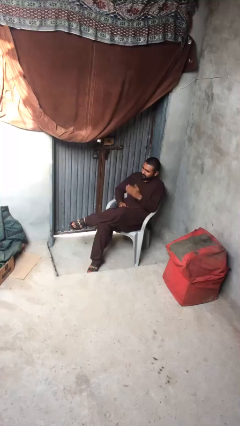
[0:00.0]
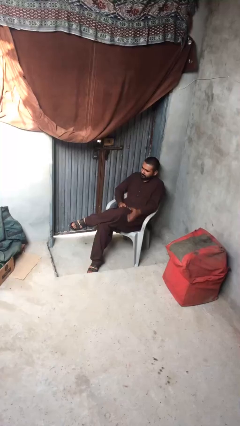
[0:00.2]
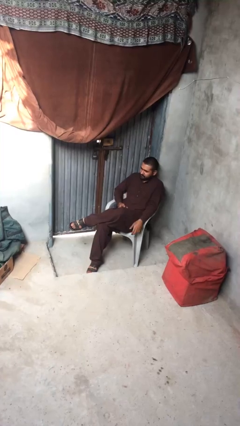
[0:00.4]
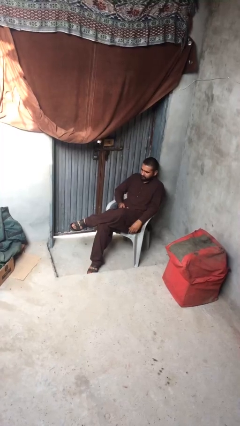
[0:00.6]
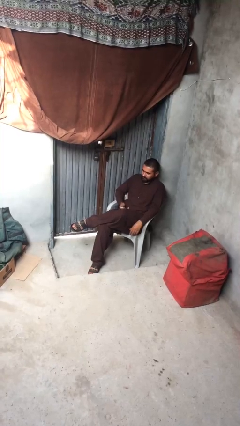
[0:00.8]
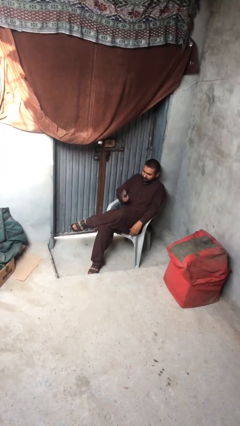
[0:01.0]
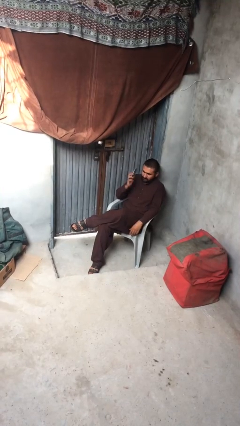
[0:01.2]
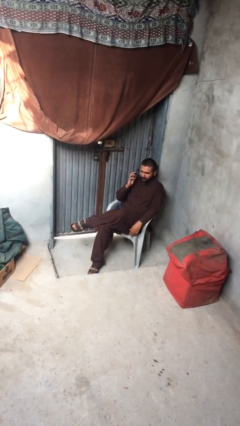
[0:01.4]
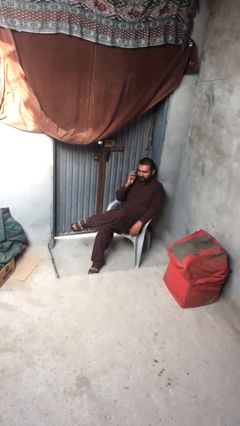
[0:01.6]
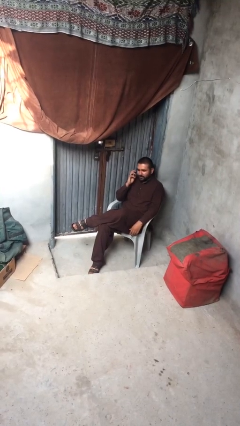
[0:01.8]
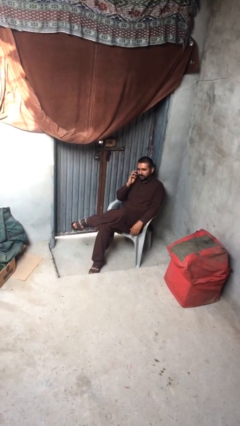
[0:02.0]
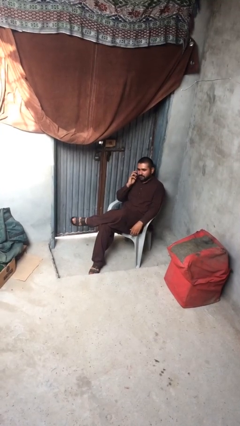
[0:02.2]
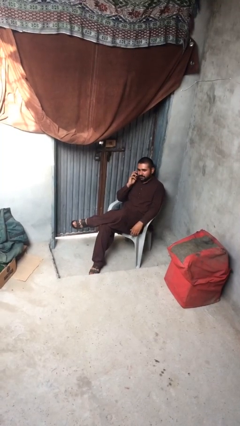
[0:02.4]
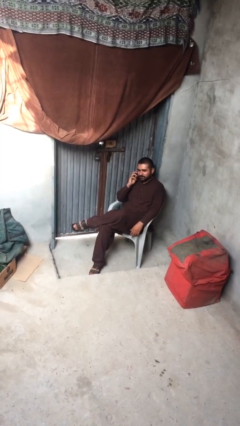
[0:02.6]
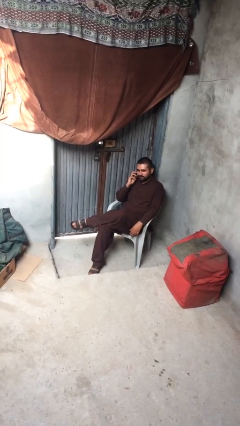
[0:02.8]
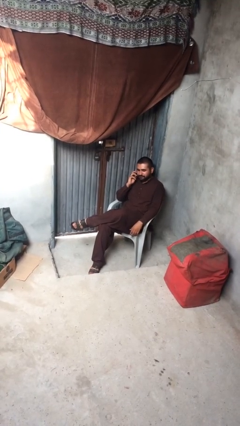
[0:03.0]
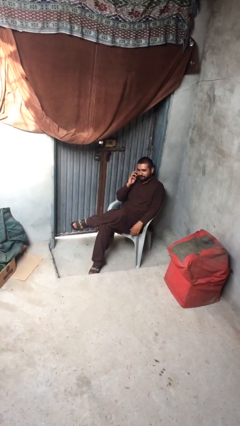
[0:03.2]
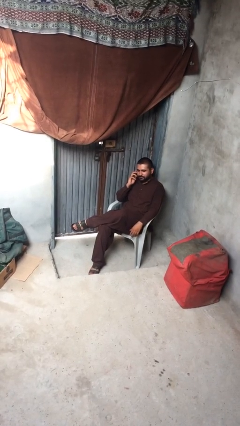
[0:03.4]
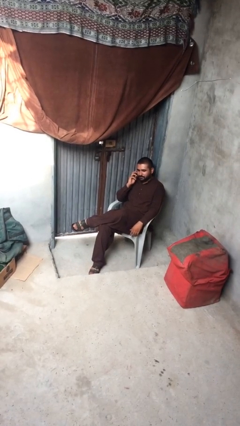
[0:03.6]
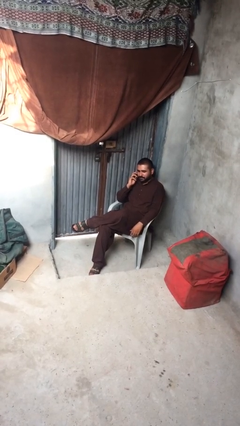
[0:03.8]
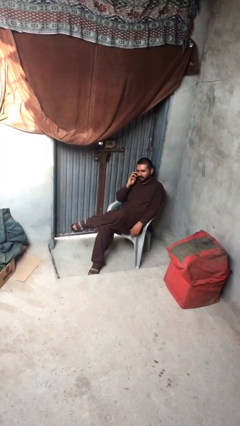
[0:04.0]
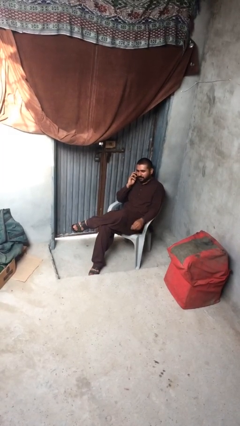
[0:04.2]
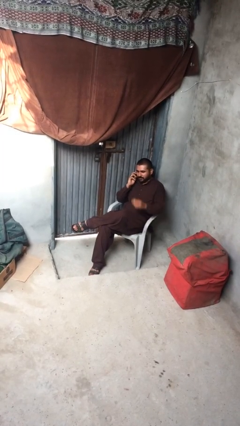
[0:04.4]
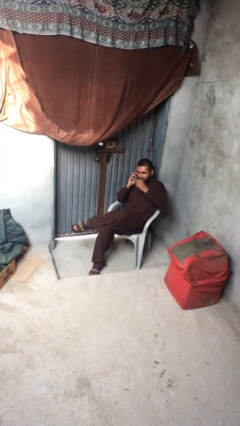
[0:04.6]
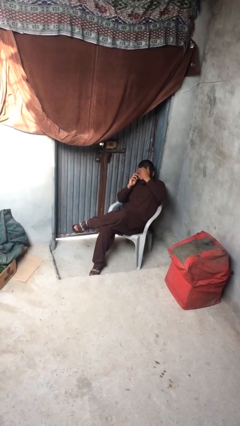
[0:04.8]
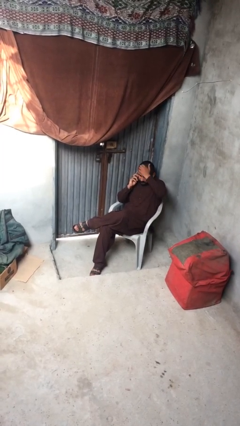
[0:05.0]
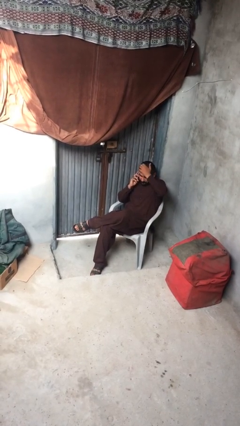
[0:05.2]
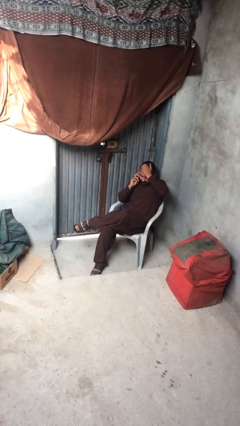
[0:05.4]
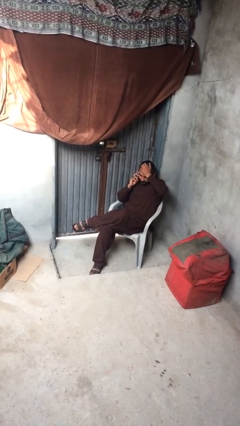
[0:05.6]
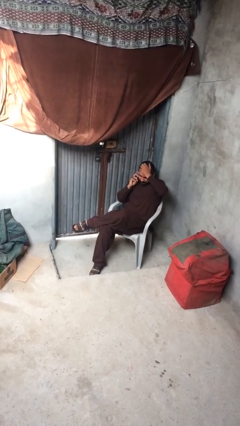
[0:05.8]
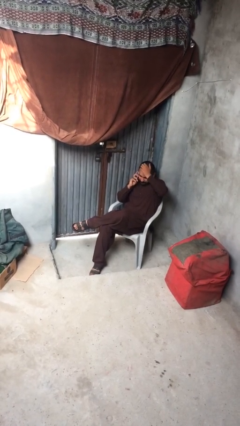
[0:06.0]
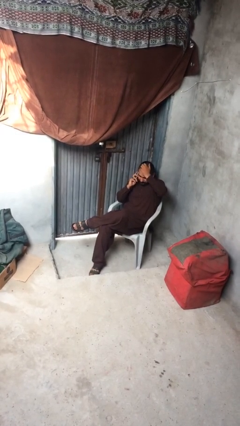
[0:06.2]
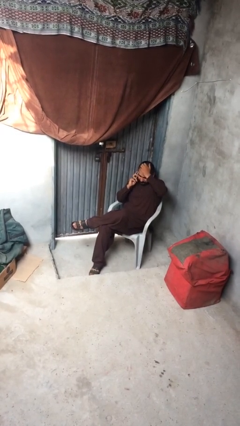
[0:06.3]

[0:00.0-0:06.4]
person talks on phone

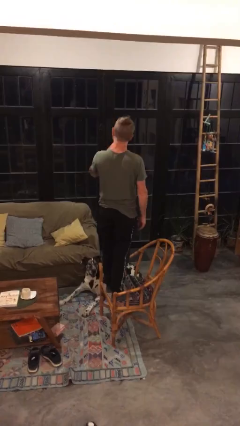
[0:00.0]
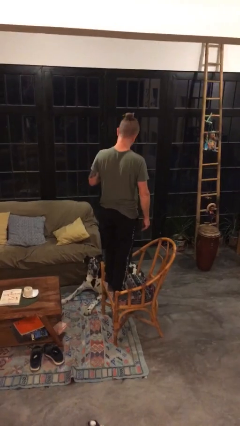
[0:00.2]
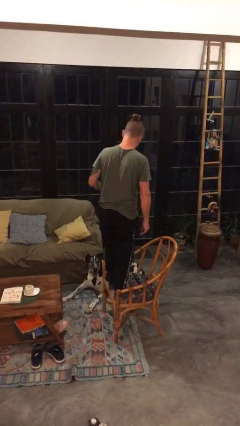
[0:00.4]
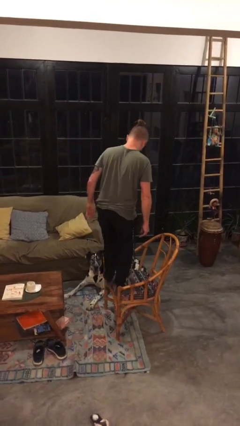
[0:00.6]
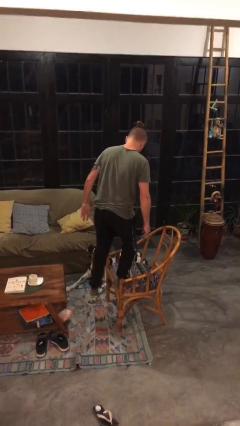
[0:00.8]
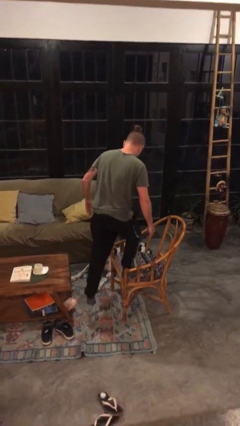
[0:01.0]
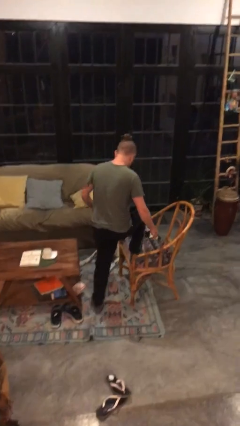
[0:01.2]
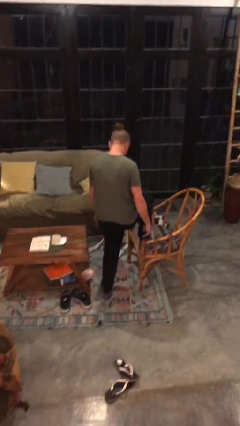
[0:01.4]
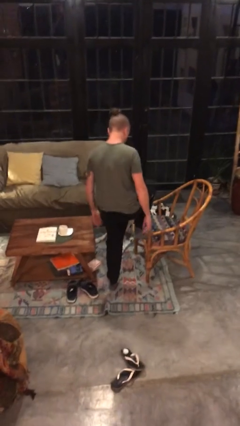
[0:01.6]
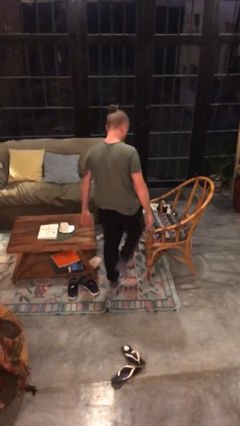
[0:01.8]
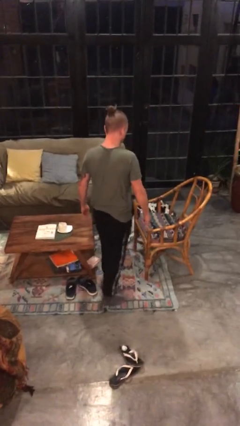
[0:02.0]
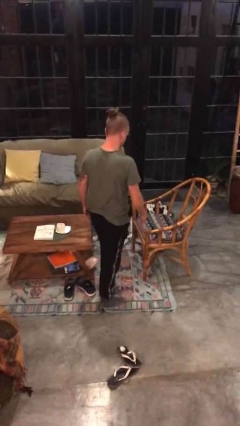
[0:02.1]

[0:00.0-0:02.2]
person climbs off chair

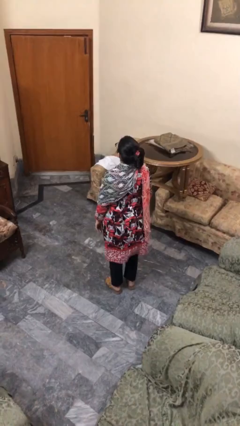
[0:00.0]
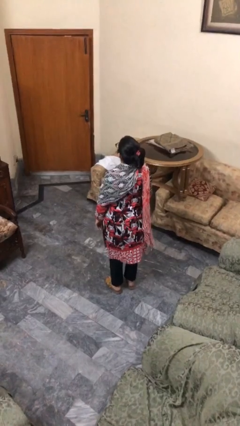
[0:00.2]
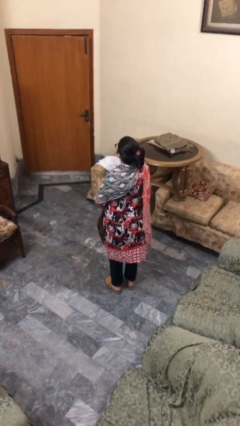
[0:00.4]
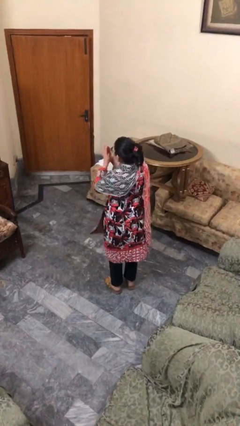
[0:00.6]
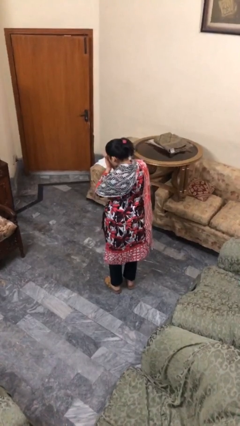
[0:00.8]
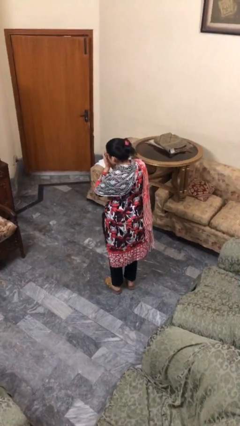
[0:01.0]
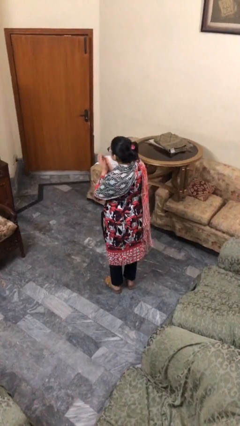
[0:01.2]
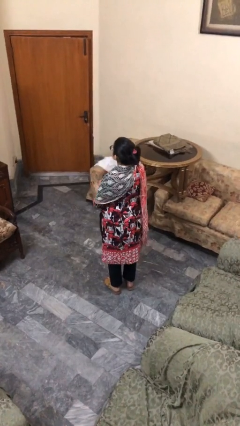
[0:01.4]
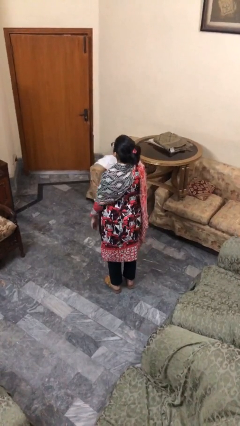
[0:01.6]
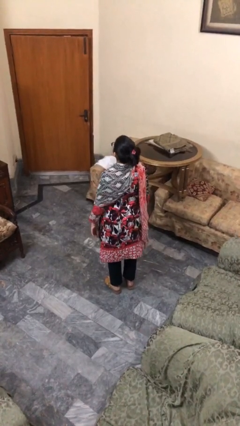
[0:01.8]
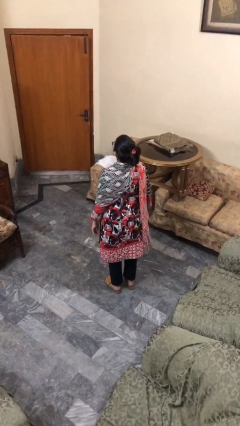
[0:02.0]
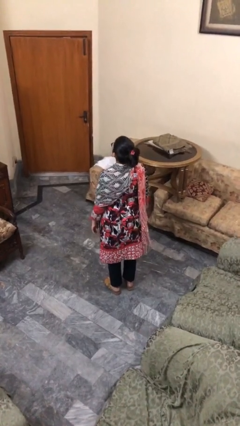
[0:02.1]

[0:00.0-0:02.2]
person sneezes into hand

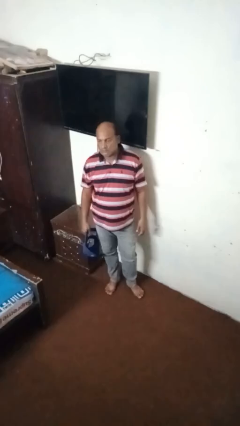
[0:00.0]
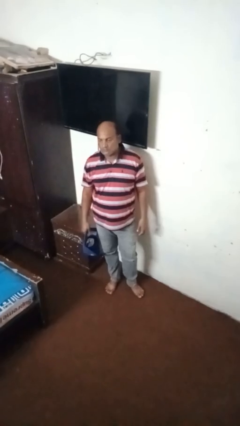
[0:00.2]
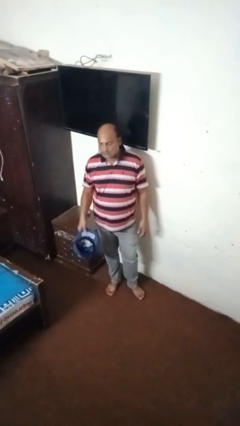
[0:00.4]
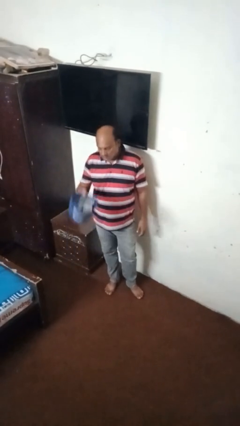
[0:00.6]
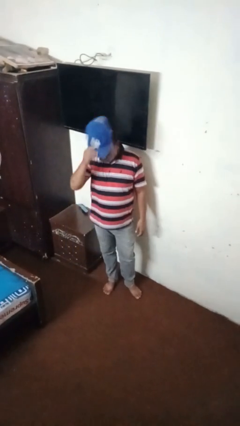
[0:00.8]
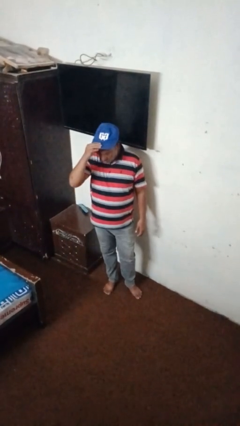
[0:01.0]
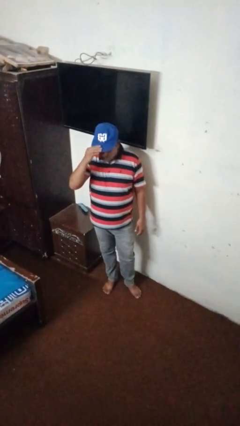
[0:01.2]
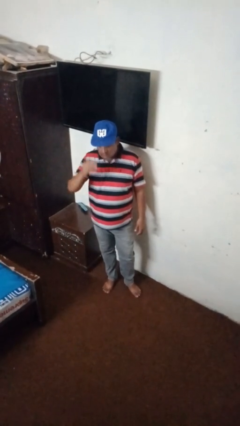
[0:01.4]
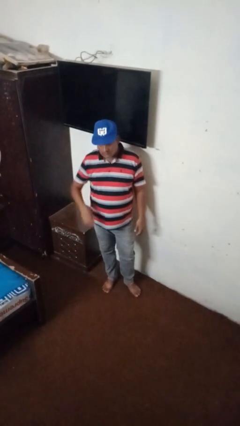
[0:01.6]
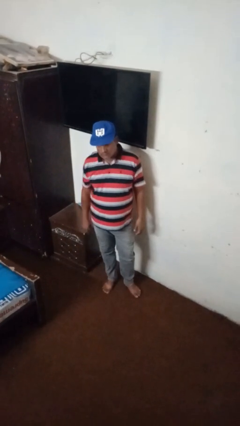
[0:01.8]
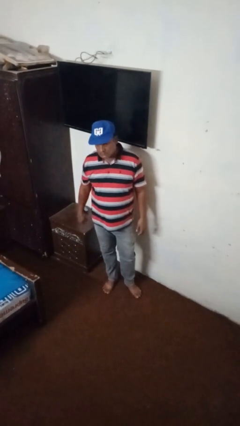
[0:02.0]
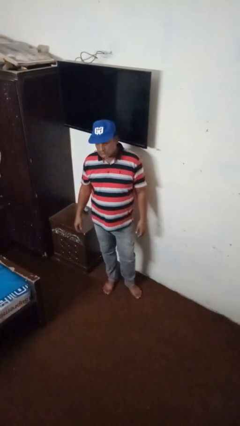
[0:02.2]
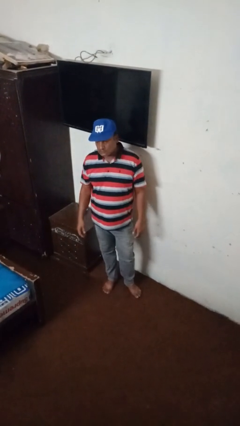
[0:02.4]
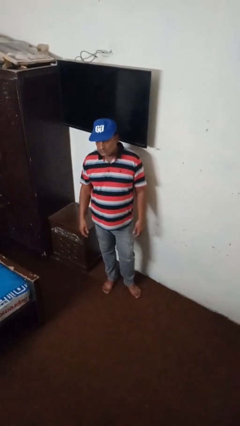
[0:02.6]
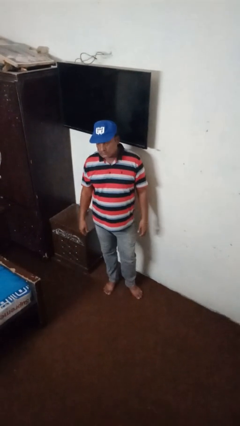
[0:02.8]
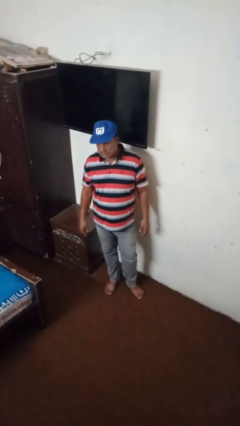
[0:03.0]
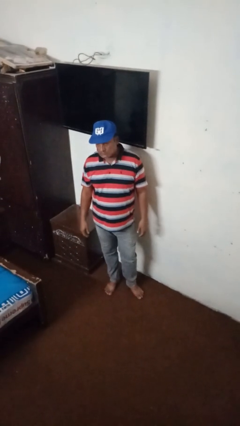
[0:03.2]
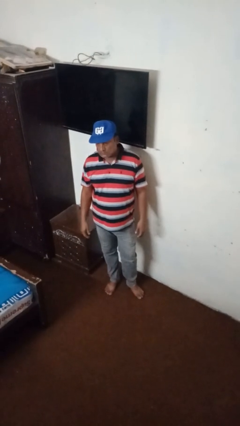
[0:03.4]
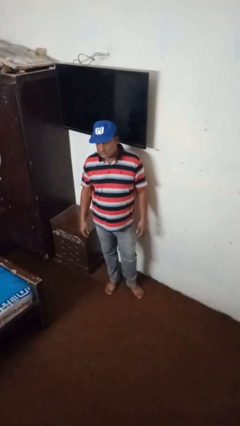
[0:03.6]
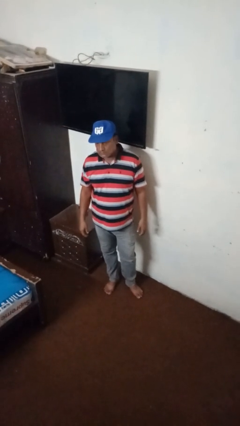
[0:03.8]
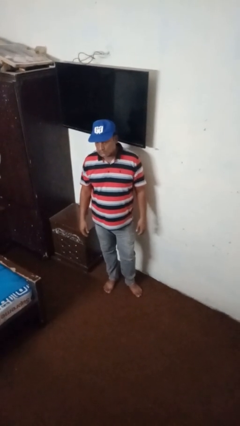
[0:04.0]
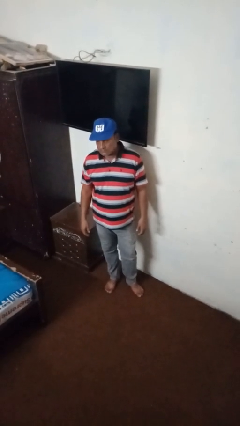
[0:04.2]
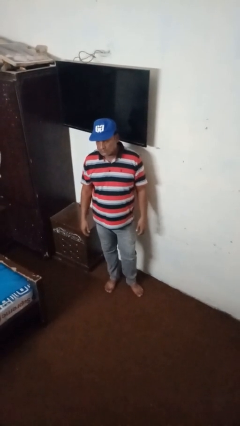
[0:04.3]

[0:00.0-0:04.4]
person puts on hat

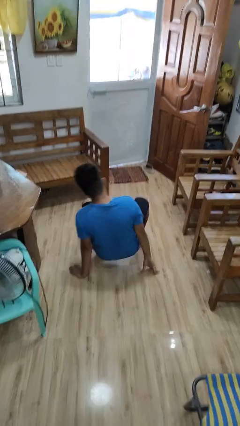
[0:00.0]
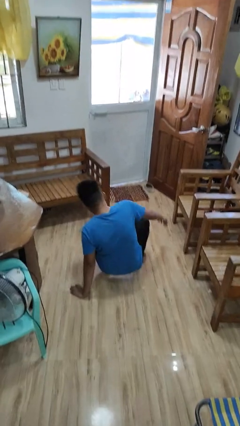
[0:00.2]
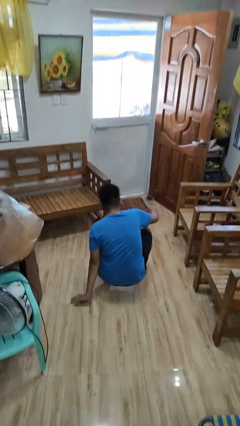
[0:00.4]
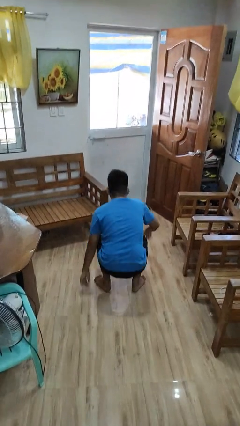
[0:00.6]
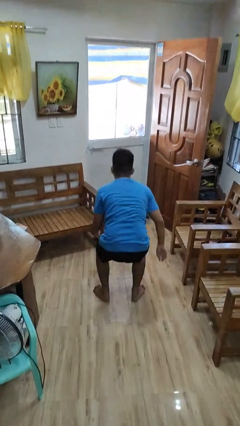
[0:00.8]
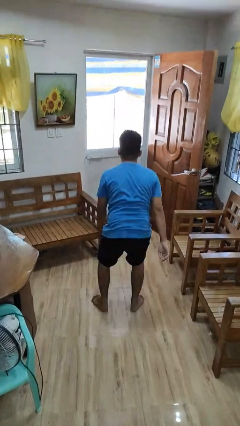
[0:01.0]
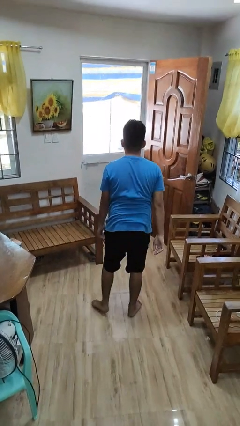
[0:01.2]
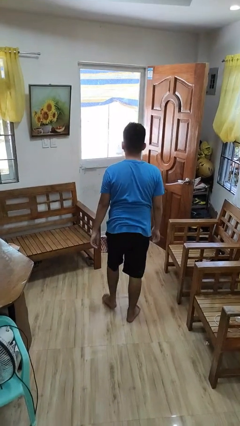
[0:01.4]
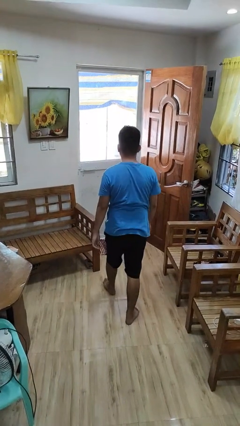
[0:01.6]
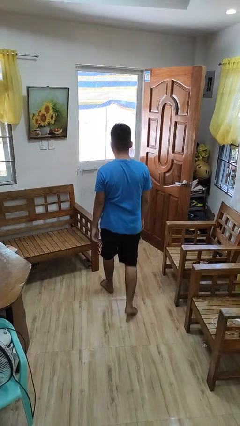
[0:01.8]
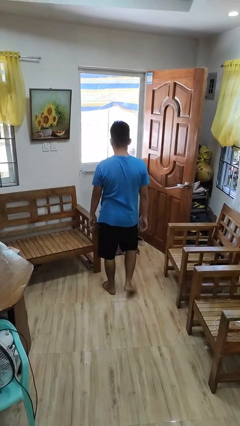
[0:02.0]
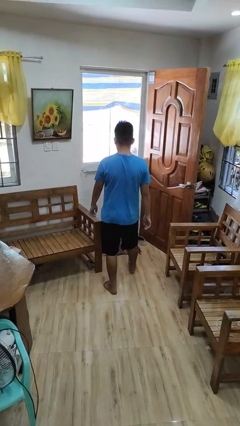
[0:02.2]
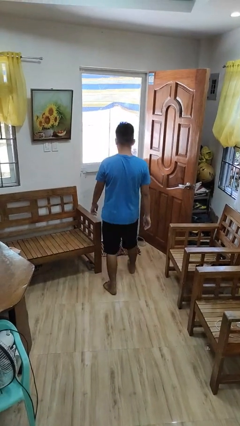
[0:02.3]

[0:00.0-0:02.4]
person stands up from floor
